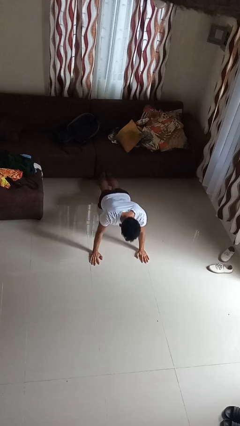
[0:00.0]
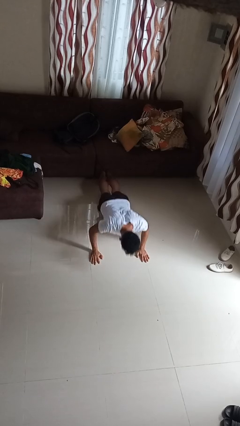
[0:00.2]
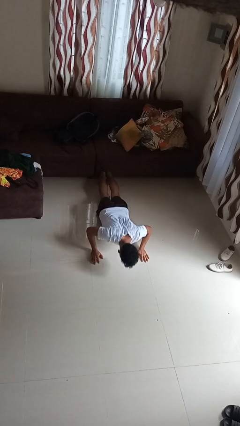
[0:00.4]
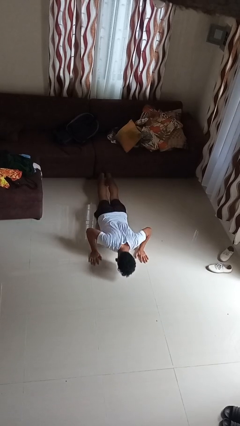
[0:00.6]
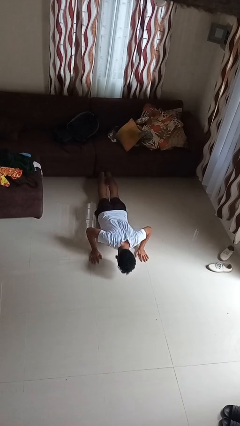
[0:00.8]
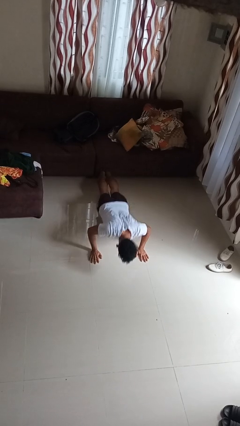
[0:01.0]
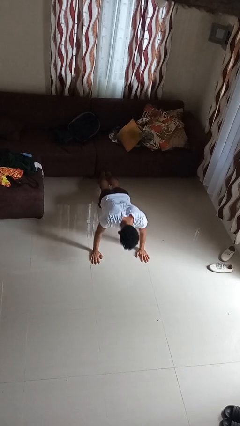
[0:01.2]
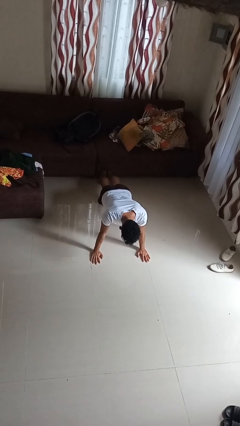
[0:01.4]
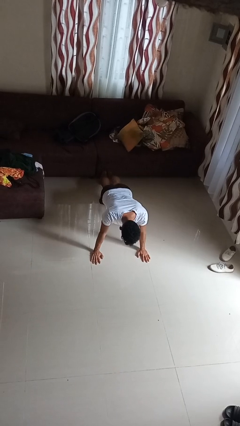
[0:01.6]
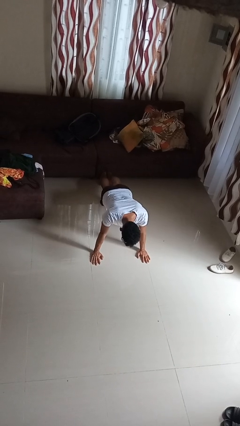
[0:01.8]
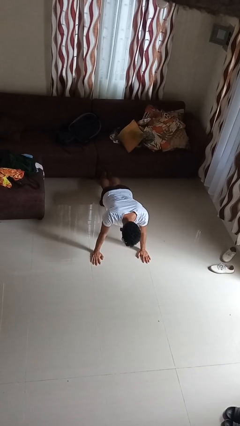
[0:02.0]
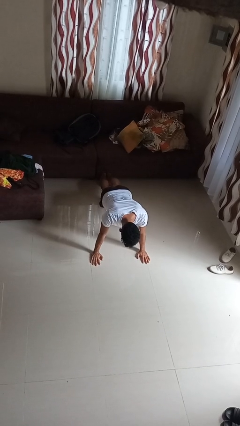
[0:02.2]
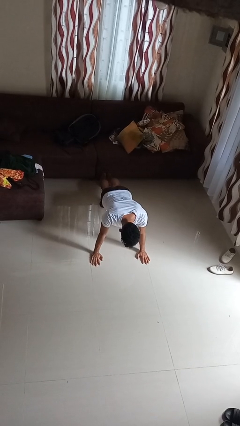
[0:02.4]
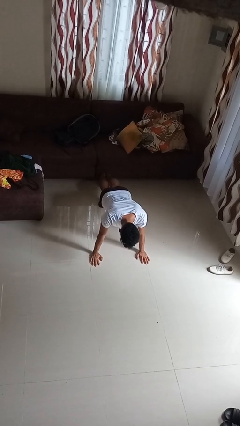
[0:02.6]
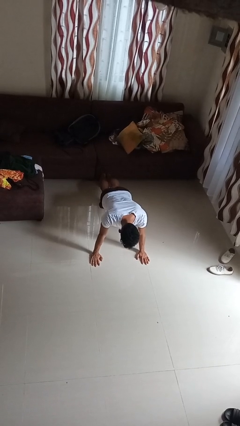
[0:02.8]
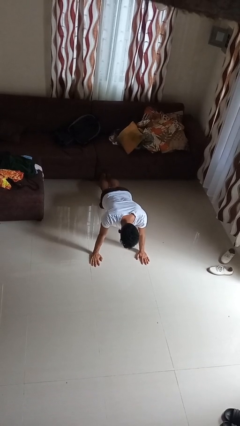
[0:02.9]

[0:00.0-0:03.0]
person exercises with pushup

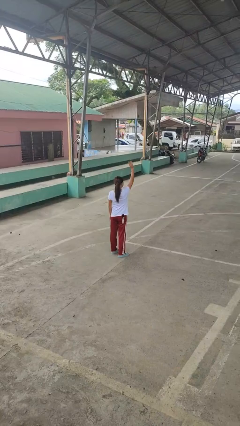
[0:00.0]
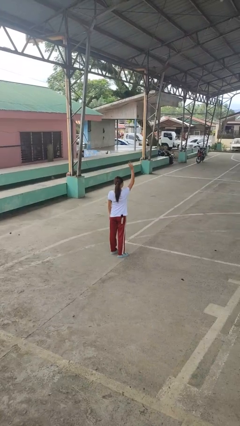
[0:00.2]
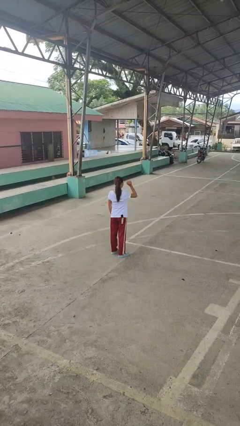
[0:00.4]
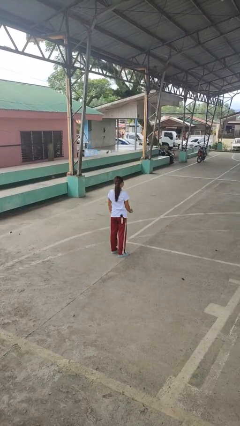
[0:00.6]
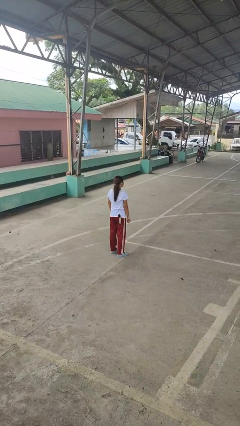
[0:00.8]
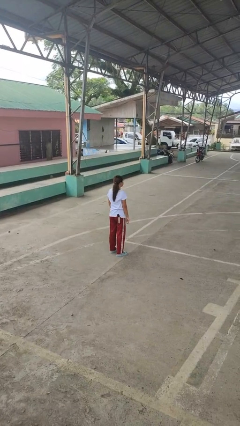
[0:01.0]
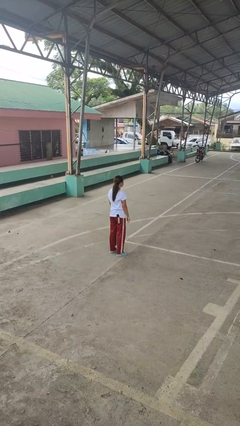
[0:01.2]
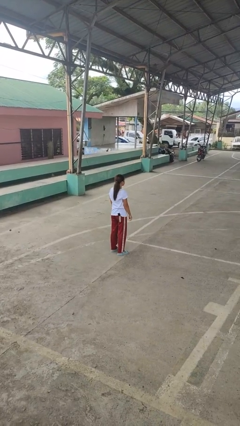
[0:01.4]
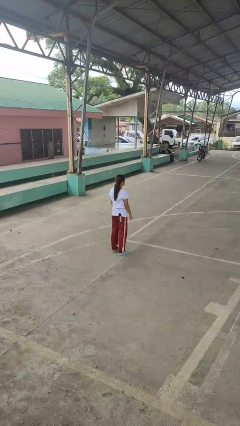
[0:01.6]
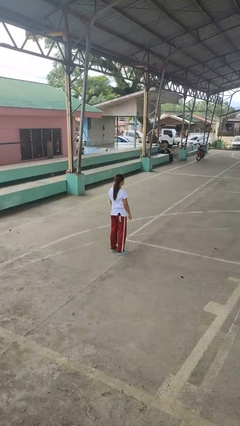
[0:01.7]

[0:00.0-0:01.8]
person gestures lower hand

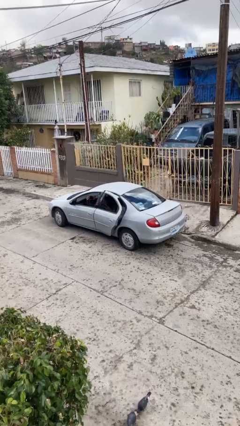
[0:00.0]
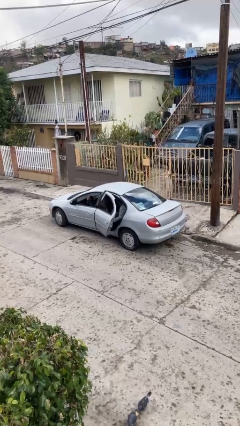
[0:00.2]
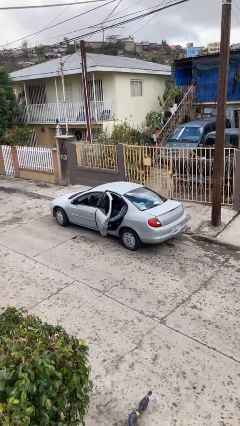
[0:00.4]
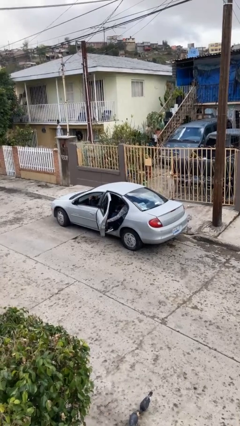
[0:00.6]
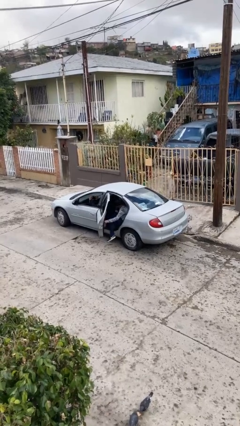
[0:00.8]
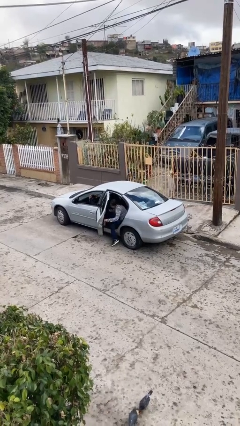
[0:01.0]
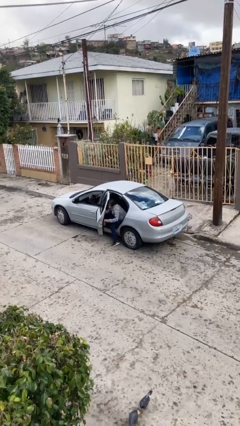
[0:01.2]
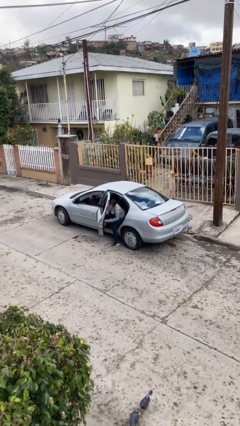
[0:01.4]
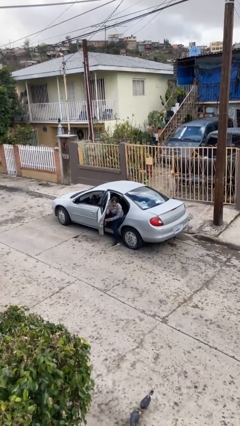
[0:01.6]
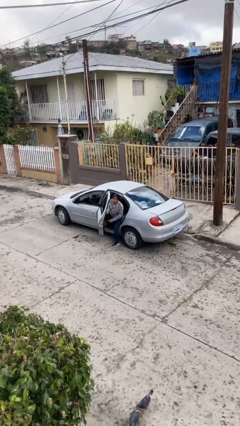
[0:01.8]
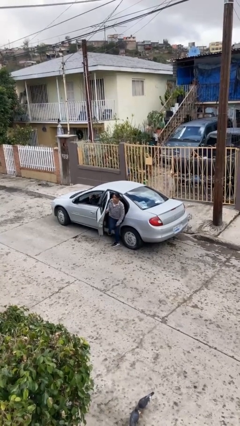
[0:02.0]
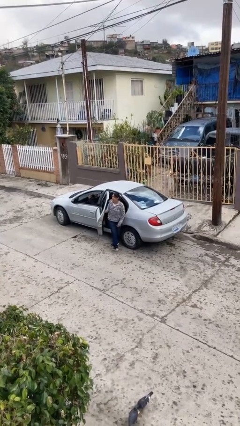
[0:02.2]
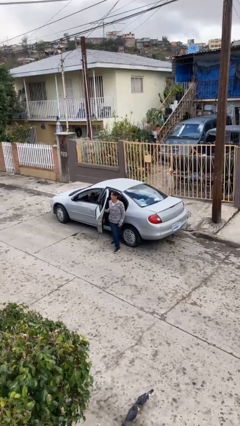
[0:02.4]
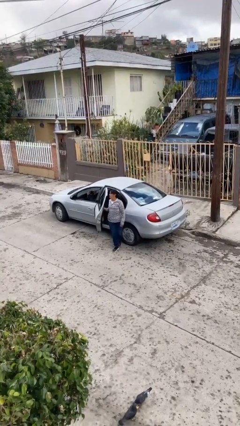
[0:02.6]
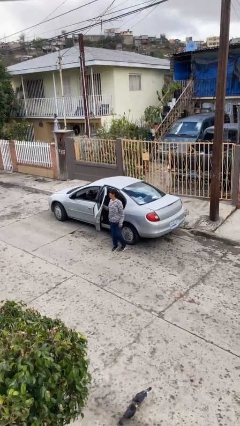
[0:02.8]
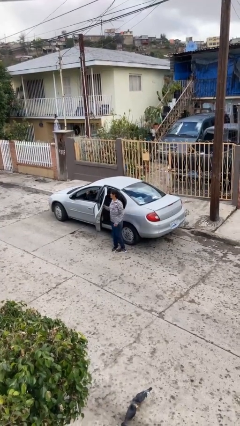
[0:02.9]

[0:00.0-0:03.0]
car drops off person

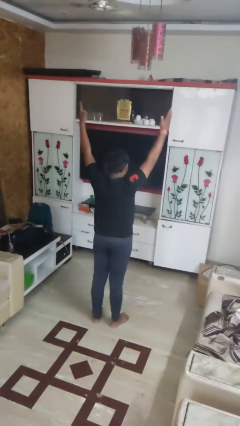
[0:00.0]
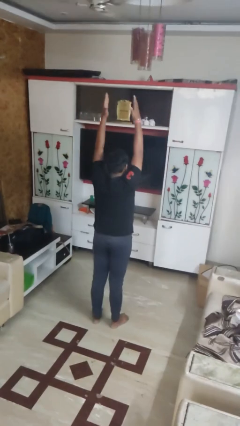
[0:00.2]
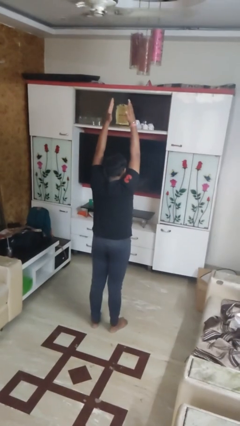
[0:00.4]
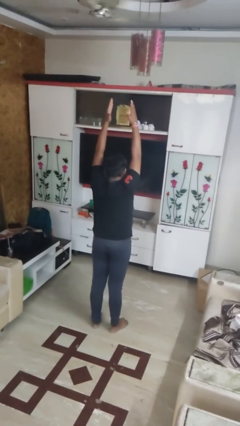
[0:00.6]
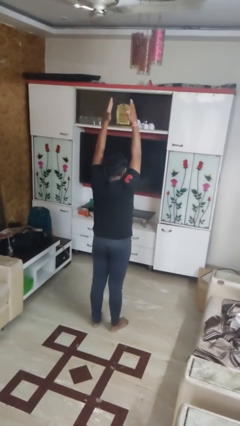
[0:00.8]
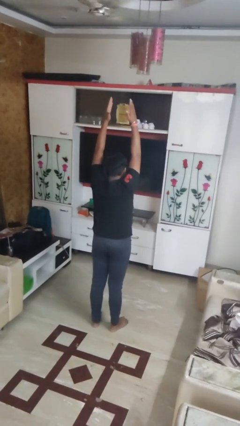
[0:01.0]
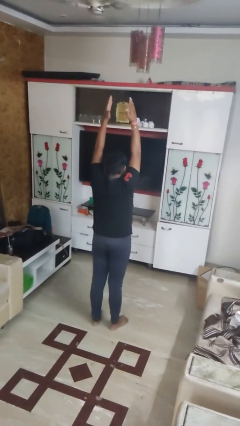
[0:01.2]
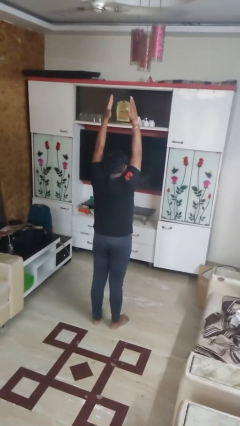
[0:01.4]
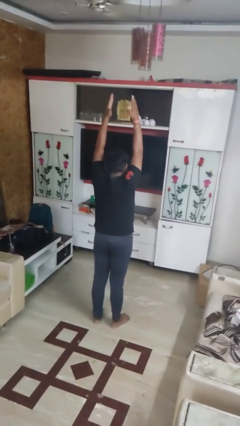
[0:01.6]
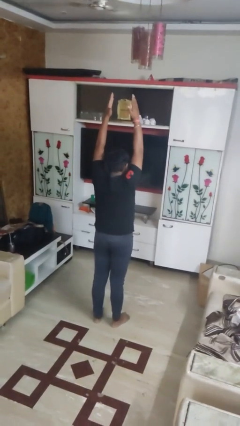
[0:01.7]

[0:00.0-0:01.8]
person stretches arms over head

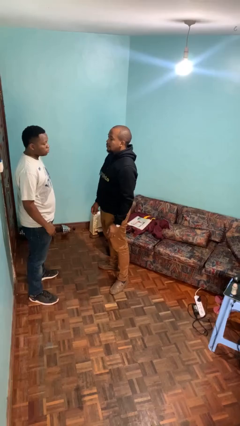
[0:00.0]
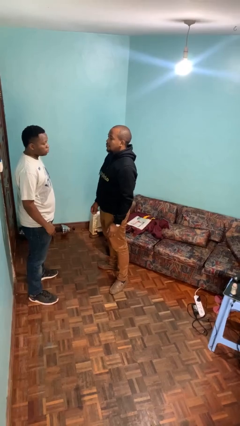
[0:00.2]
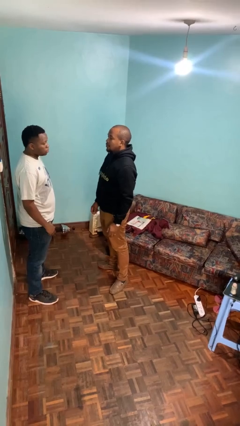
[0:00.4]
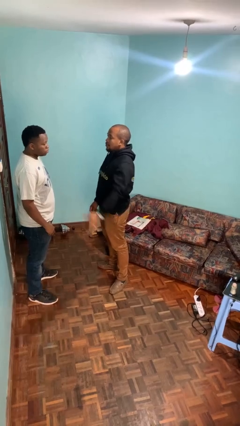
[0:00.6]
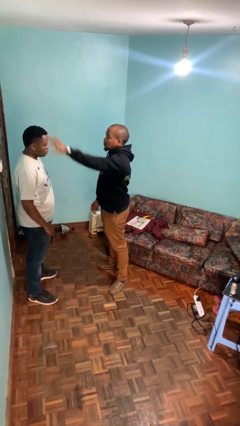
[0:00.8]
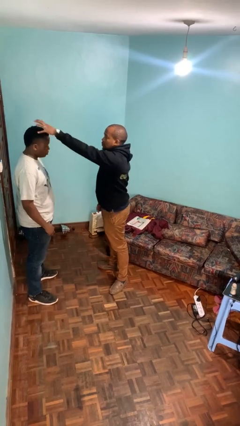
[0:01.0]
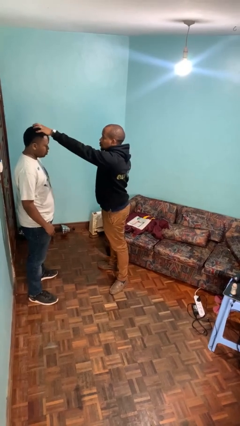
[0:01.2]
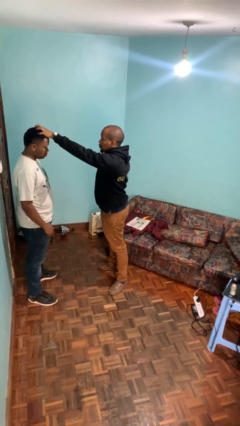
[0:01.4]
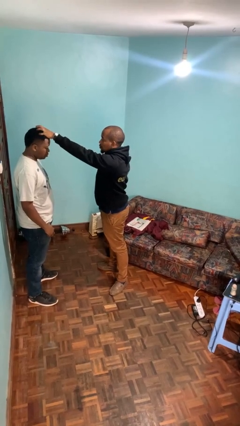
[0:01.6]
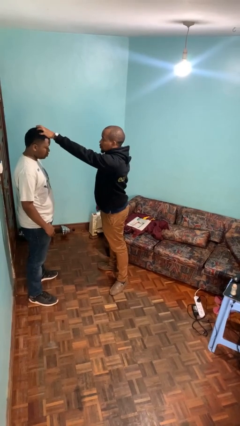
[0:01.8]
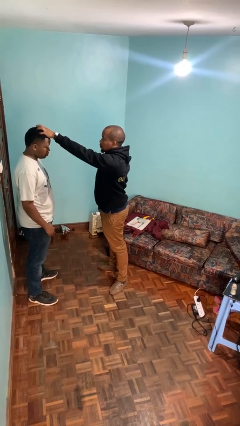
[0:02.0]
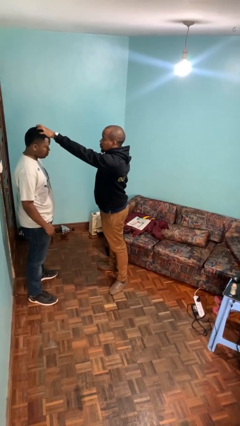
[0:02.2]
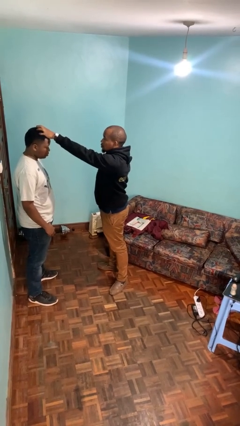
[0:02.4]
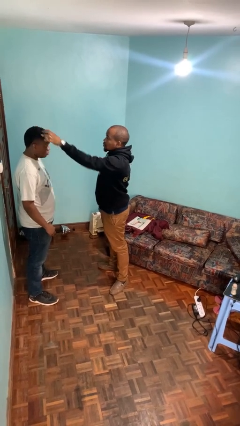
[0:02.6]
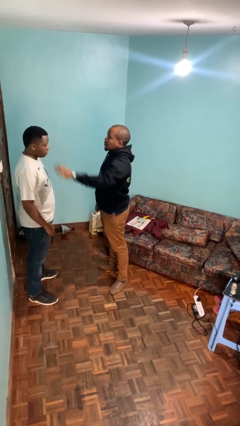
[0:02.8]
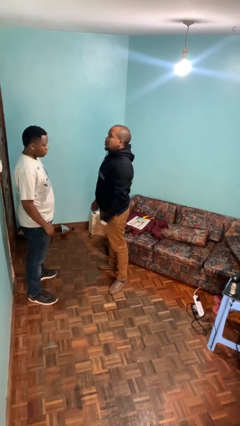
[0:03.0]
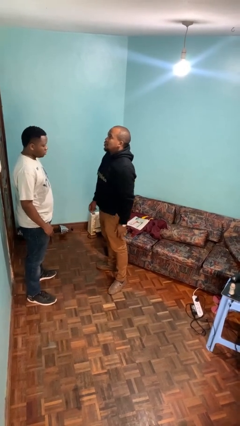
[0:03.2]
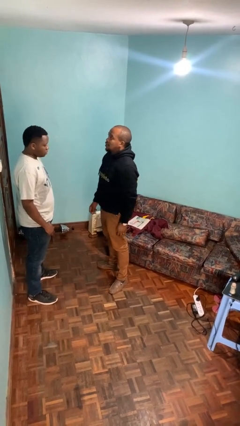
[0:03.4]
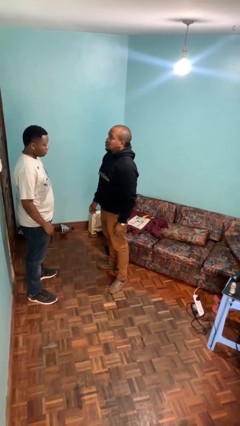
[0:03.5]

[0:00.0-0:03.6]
person grabs person by hair

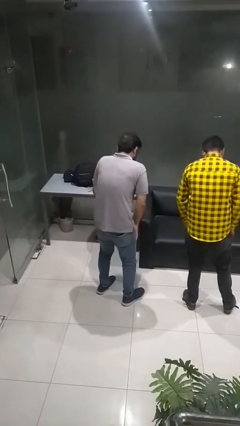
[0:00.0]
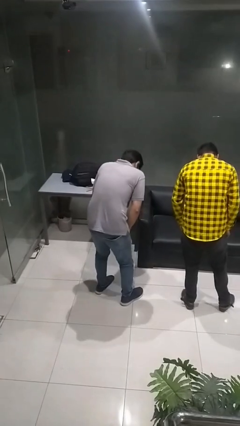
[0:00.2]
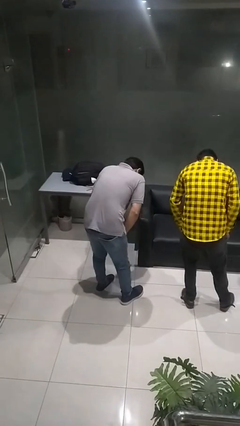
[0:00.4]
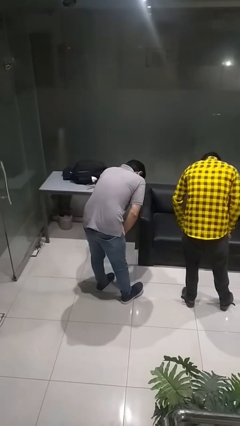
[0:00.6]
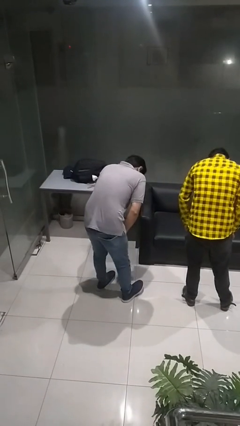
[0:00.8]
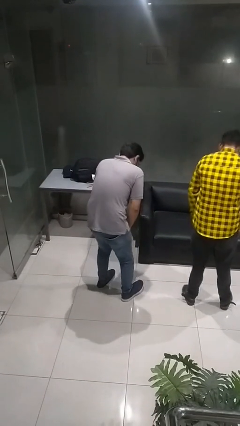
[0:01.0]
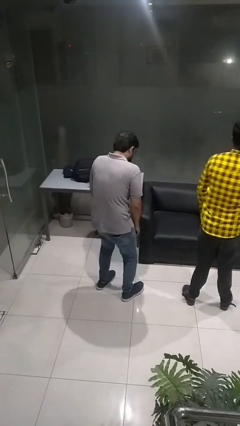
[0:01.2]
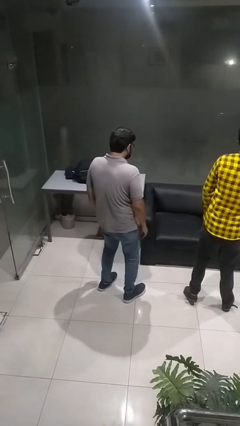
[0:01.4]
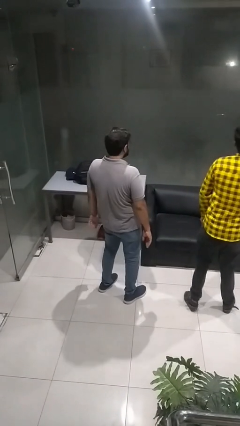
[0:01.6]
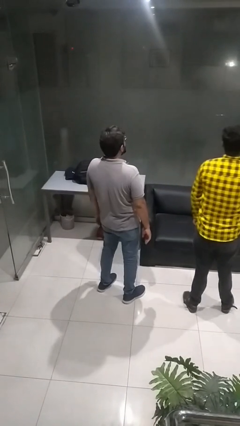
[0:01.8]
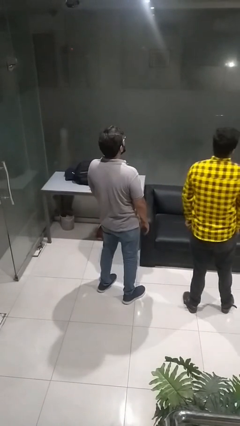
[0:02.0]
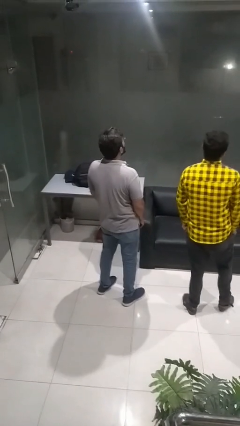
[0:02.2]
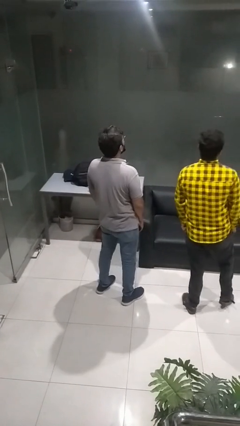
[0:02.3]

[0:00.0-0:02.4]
person laughs with person

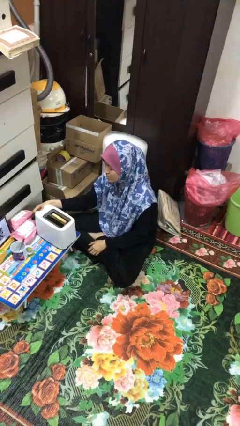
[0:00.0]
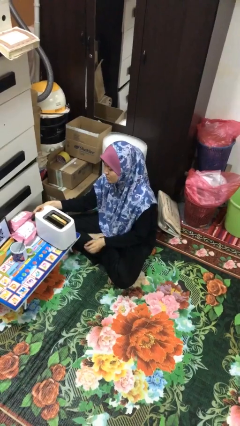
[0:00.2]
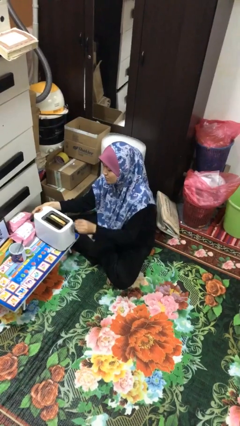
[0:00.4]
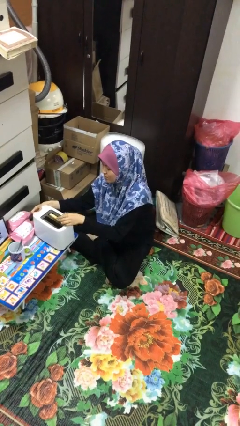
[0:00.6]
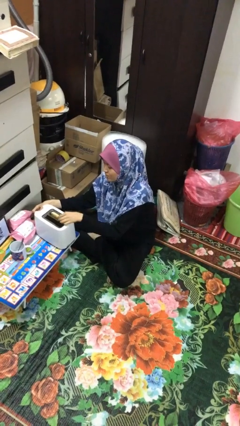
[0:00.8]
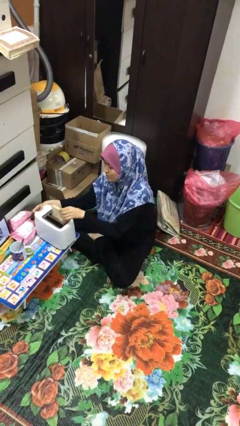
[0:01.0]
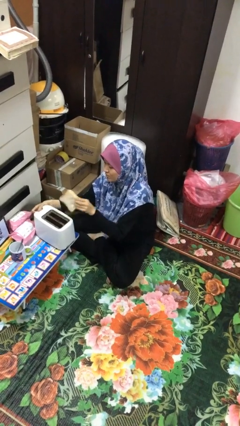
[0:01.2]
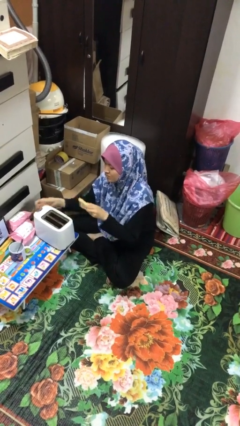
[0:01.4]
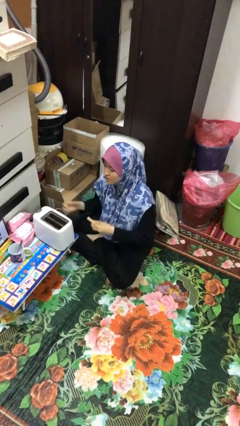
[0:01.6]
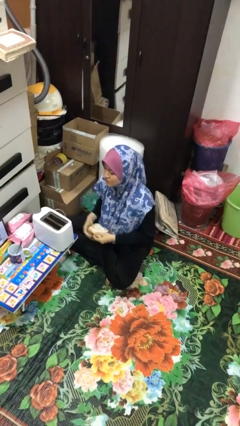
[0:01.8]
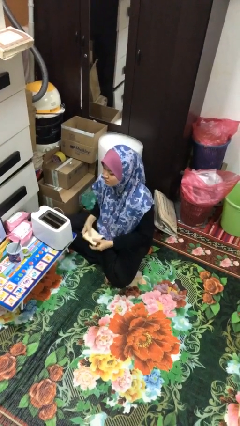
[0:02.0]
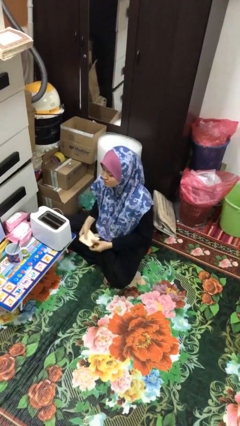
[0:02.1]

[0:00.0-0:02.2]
person takes object from toaster
